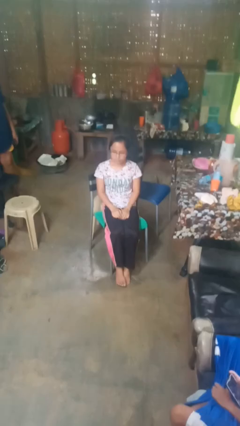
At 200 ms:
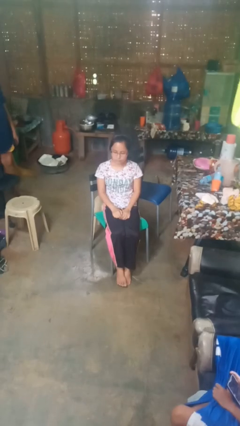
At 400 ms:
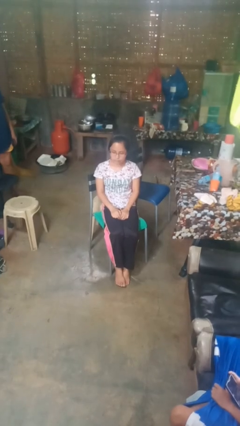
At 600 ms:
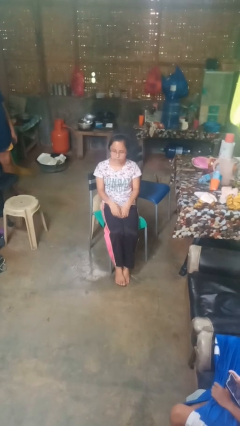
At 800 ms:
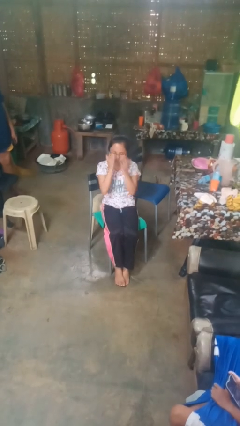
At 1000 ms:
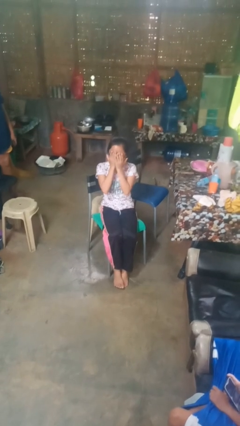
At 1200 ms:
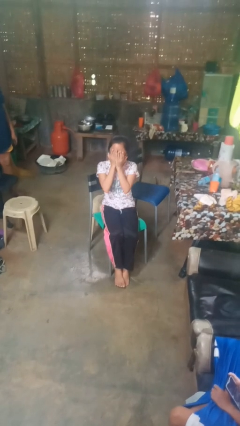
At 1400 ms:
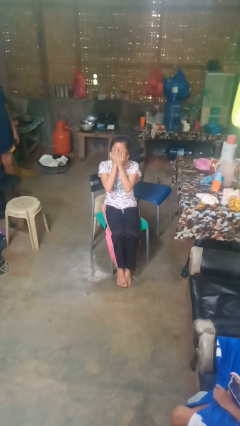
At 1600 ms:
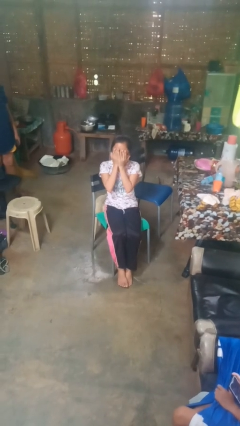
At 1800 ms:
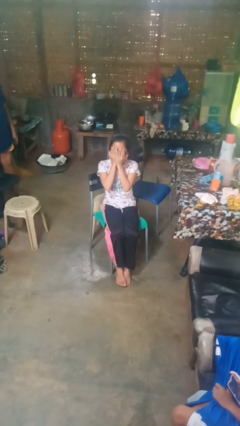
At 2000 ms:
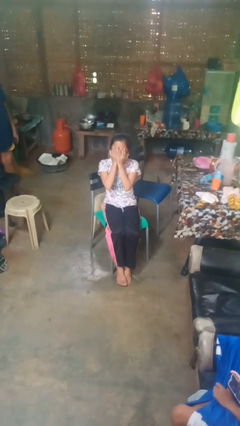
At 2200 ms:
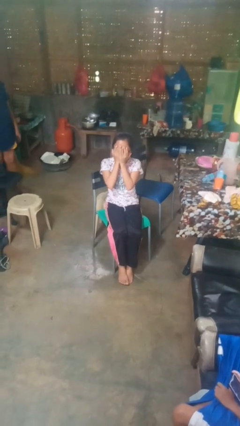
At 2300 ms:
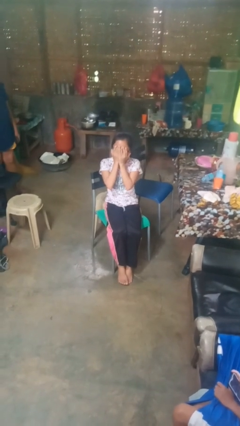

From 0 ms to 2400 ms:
person covers face with hands

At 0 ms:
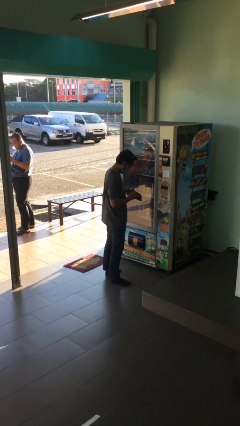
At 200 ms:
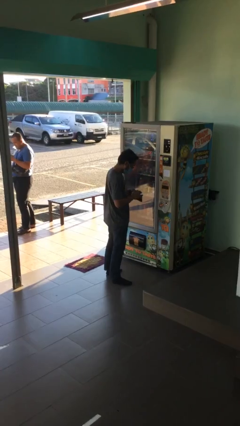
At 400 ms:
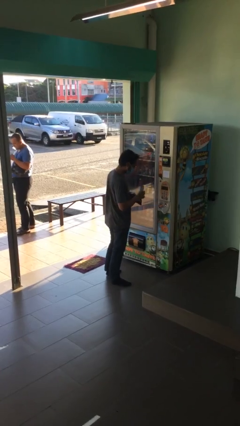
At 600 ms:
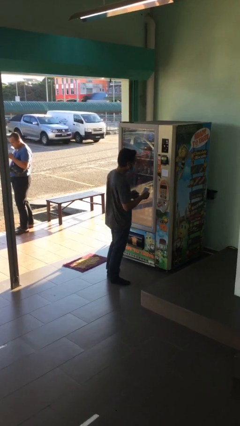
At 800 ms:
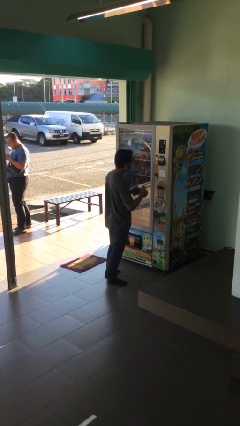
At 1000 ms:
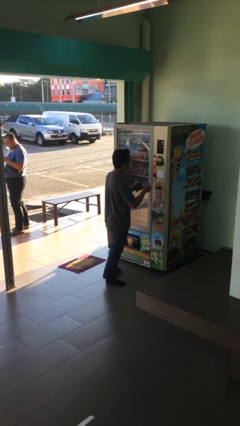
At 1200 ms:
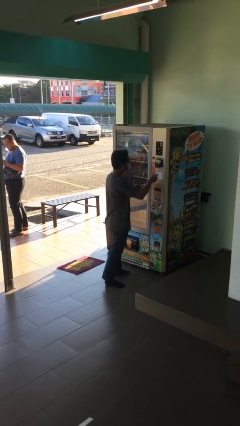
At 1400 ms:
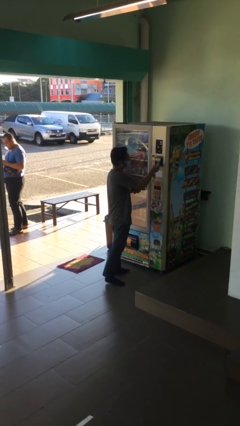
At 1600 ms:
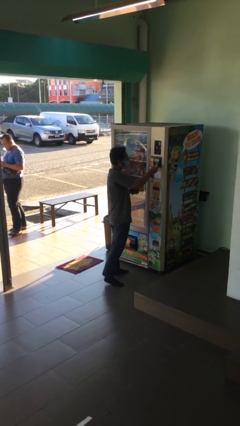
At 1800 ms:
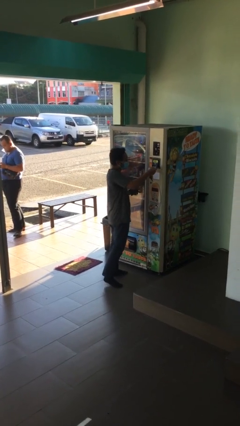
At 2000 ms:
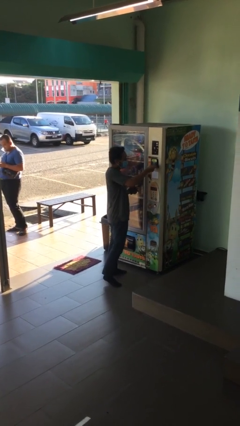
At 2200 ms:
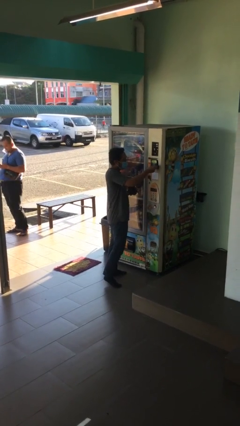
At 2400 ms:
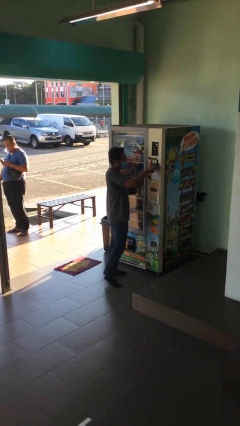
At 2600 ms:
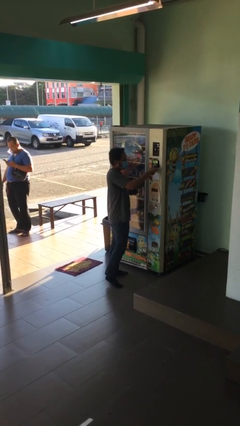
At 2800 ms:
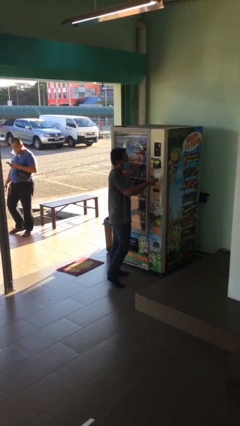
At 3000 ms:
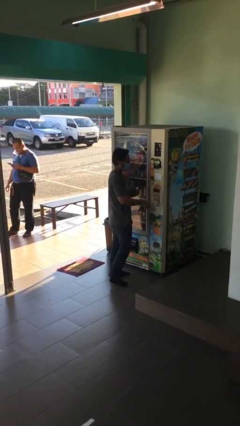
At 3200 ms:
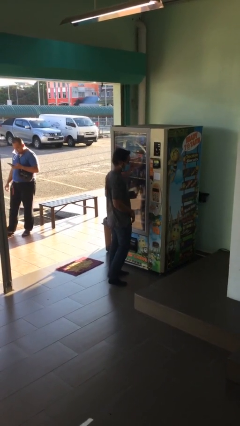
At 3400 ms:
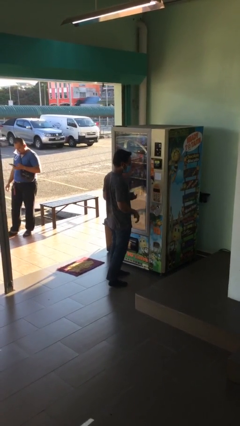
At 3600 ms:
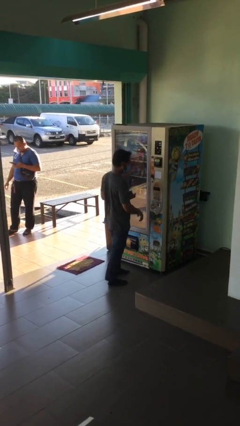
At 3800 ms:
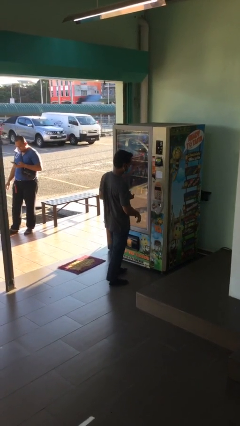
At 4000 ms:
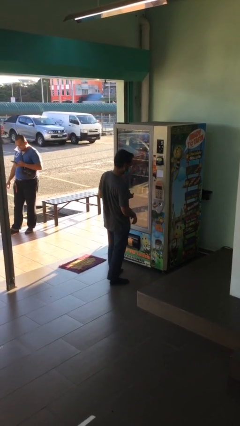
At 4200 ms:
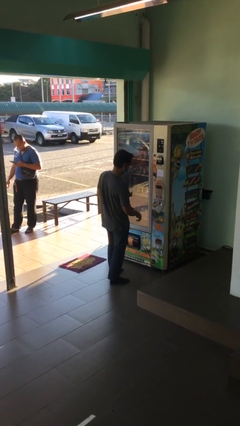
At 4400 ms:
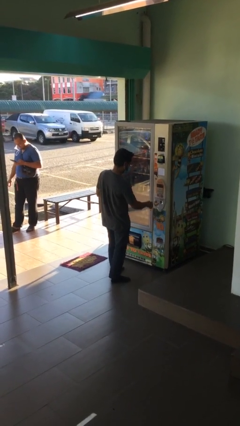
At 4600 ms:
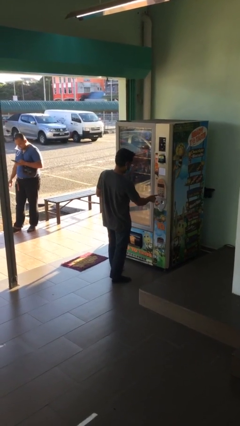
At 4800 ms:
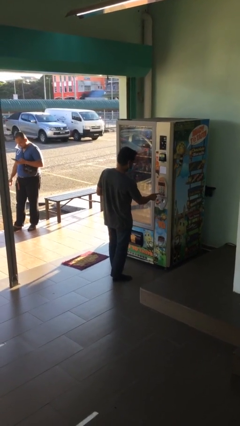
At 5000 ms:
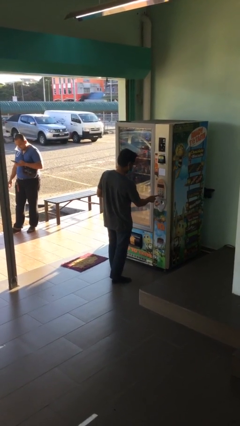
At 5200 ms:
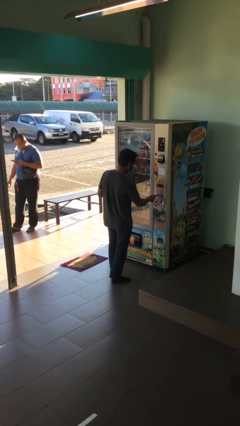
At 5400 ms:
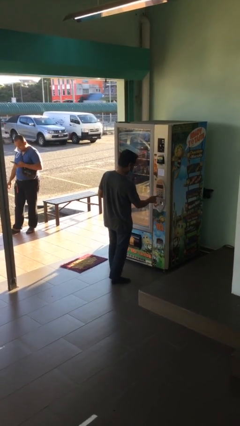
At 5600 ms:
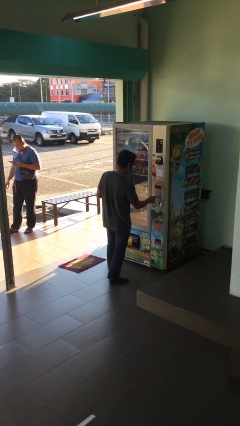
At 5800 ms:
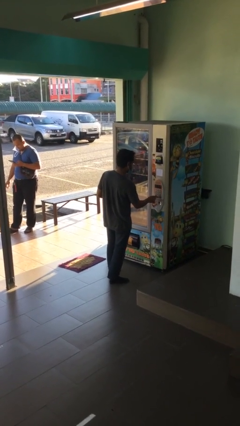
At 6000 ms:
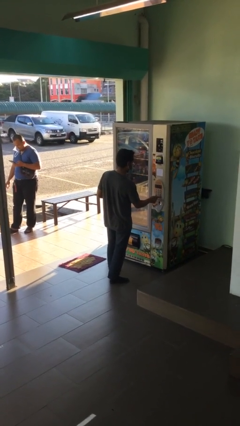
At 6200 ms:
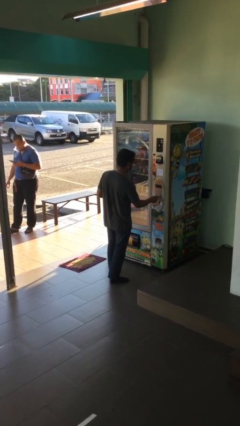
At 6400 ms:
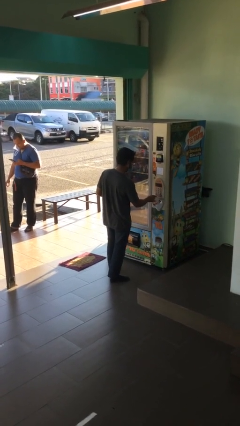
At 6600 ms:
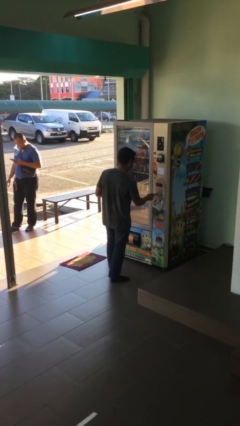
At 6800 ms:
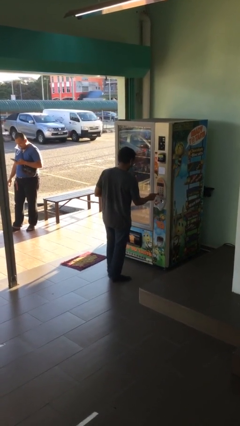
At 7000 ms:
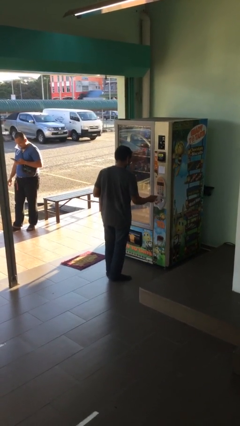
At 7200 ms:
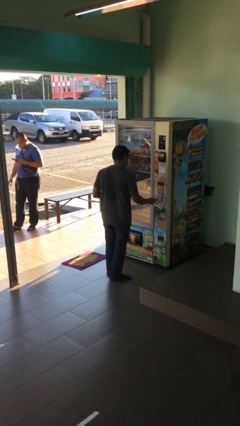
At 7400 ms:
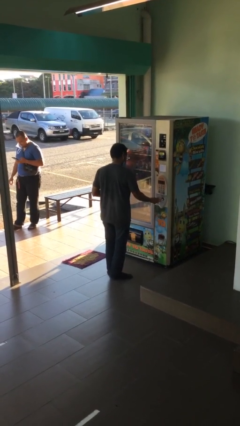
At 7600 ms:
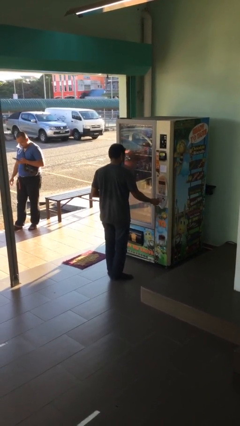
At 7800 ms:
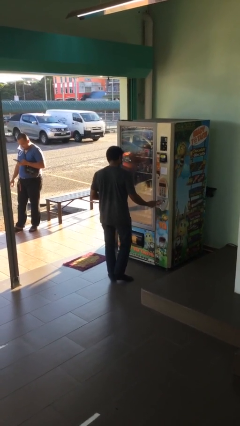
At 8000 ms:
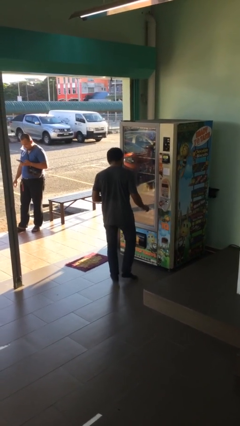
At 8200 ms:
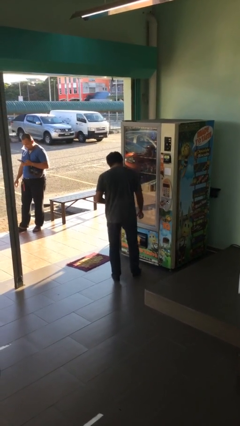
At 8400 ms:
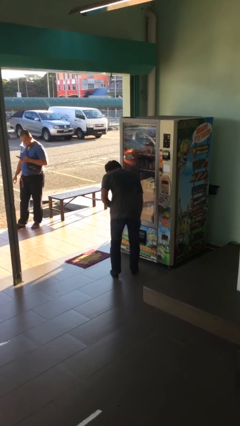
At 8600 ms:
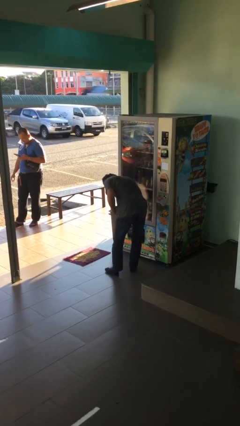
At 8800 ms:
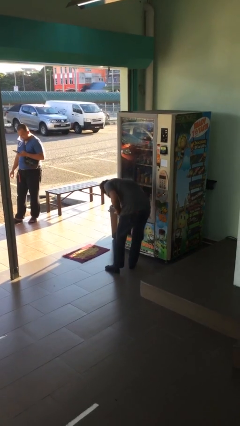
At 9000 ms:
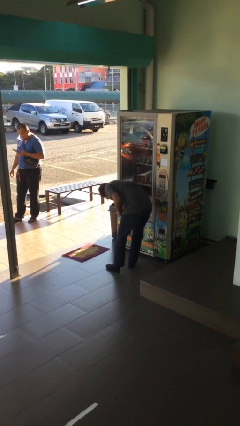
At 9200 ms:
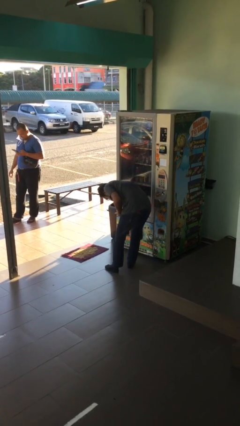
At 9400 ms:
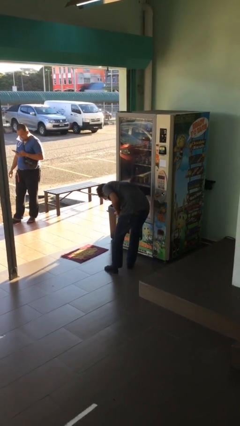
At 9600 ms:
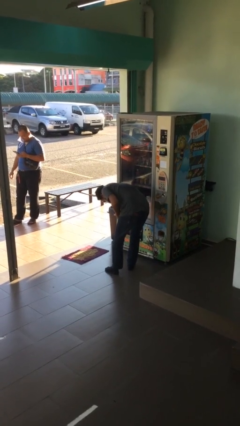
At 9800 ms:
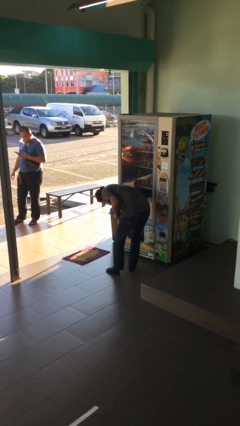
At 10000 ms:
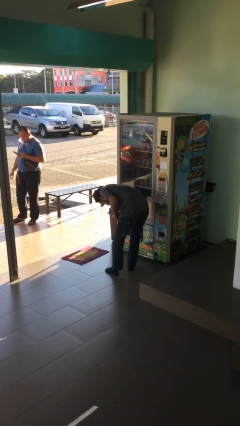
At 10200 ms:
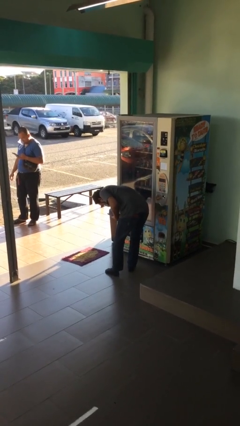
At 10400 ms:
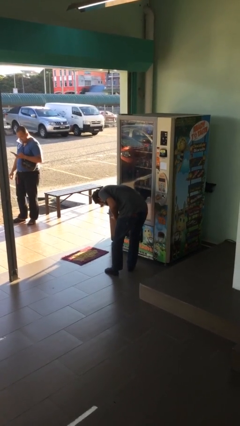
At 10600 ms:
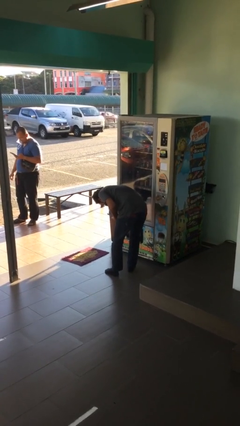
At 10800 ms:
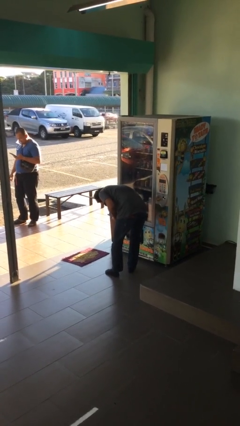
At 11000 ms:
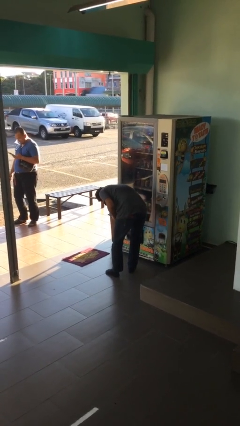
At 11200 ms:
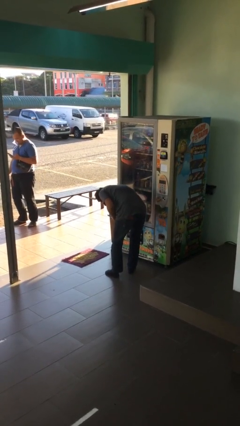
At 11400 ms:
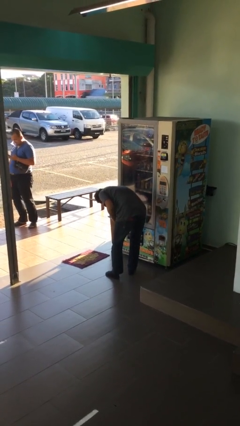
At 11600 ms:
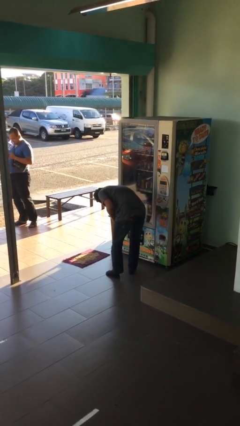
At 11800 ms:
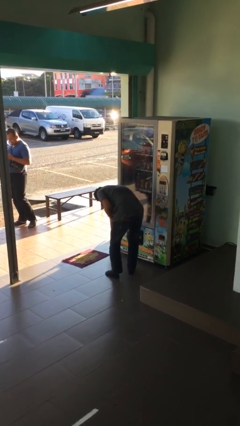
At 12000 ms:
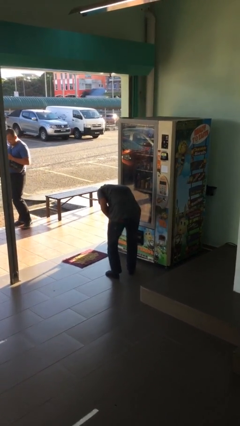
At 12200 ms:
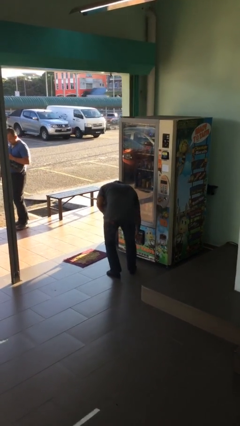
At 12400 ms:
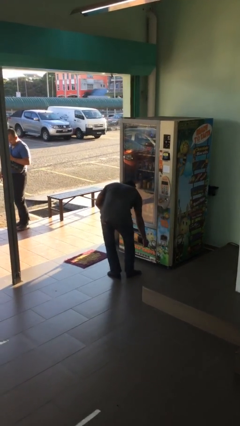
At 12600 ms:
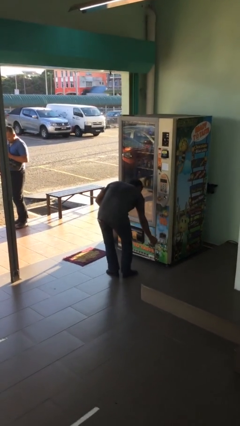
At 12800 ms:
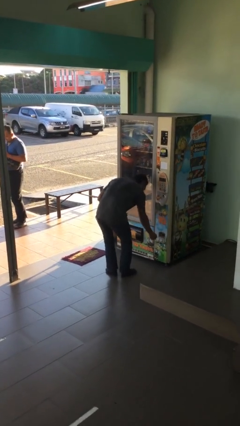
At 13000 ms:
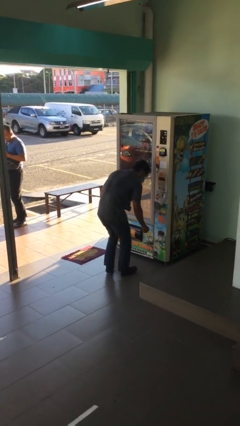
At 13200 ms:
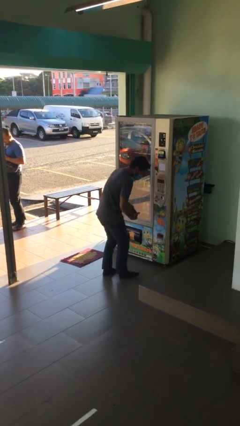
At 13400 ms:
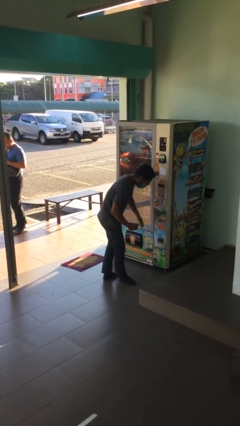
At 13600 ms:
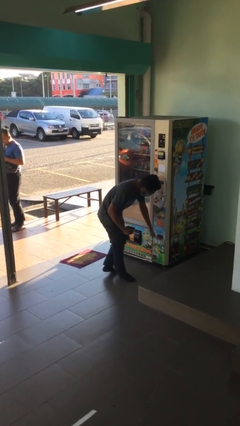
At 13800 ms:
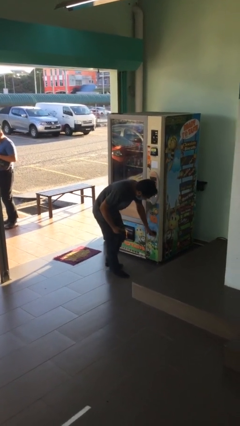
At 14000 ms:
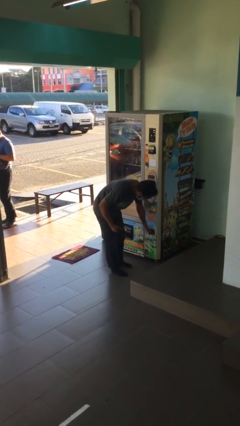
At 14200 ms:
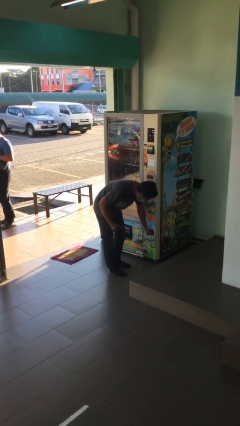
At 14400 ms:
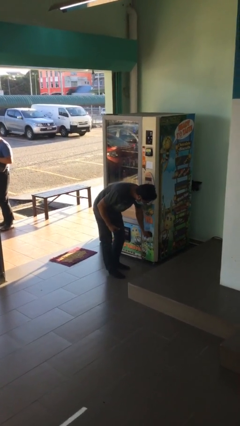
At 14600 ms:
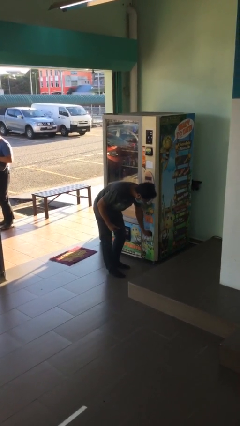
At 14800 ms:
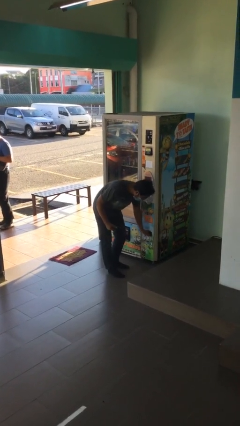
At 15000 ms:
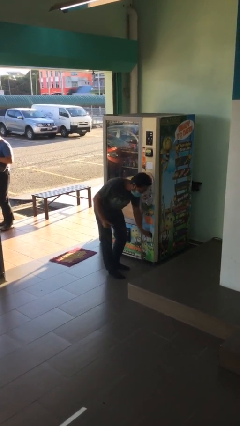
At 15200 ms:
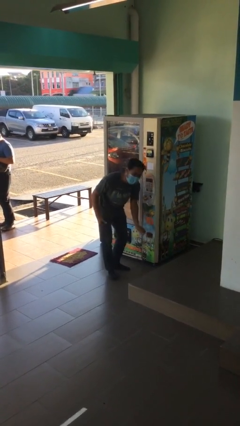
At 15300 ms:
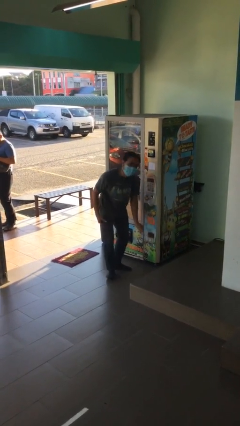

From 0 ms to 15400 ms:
person purchases from machine
